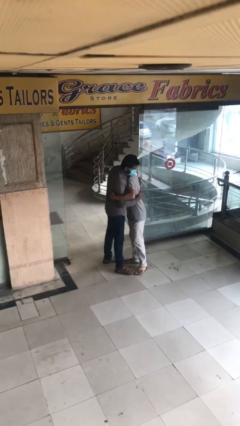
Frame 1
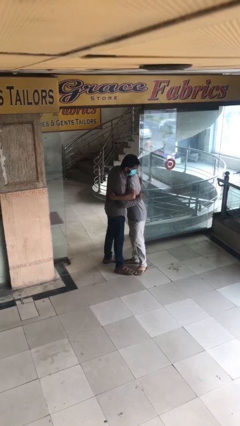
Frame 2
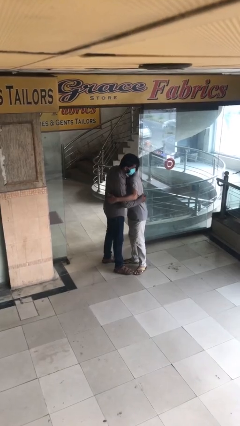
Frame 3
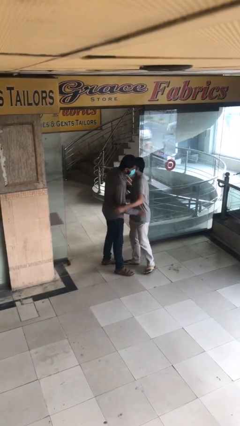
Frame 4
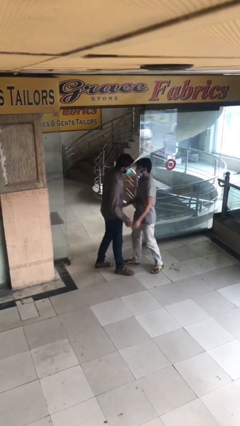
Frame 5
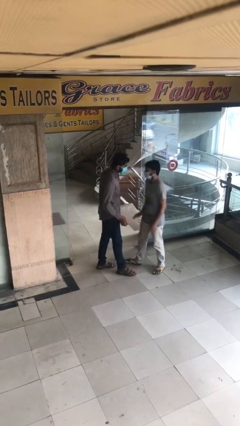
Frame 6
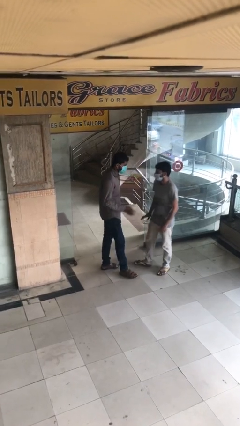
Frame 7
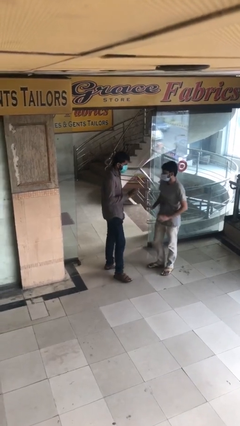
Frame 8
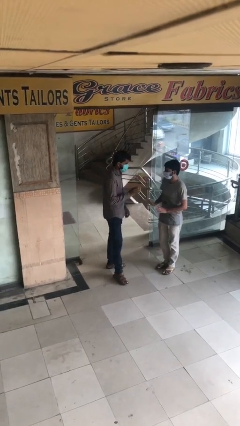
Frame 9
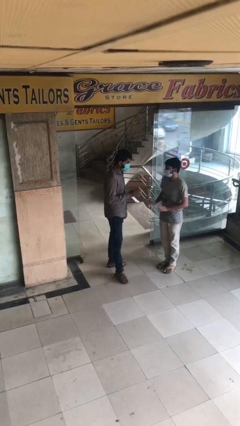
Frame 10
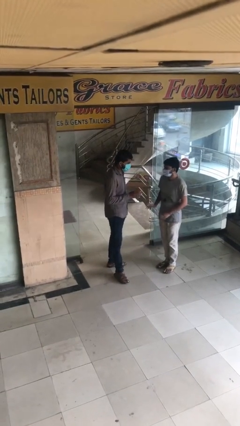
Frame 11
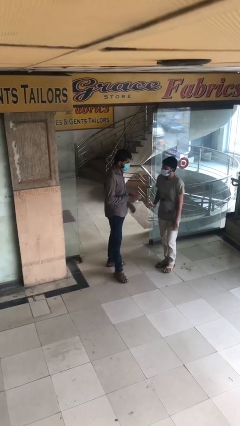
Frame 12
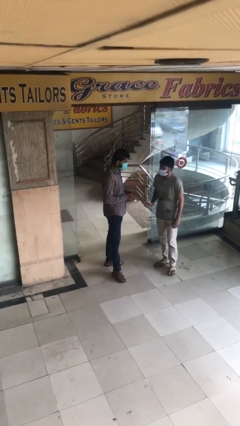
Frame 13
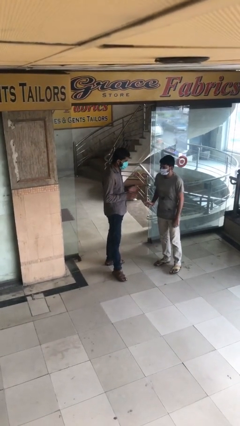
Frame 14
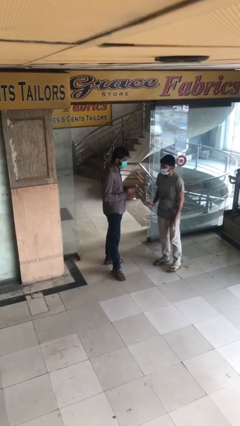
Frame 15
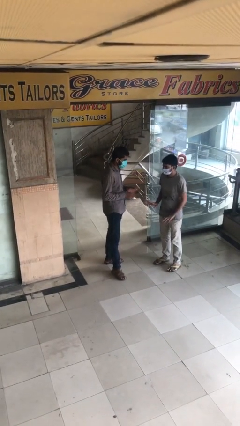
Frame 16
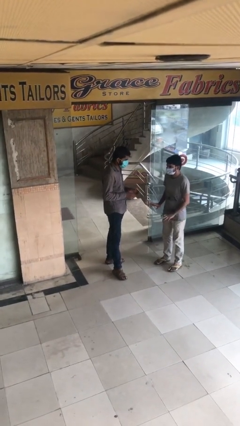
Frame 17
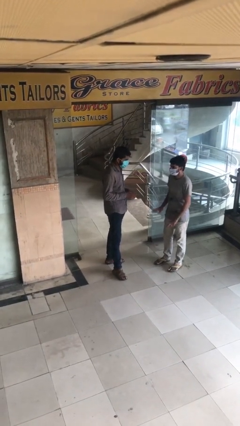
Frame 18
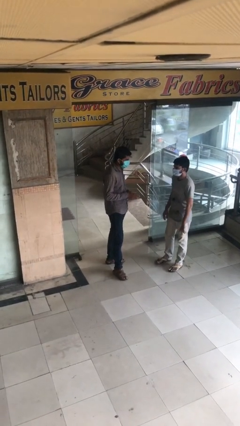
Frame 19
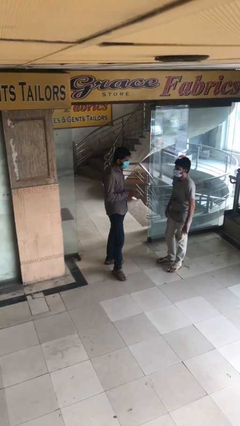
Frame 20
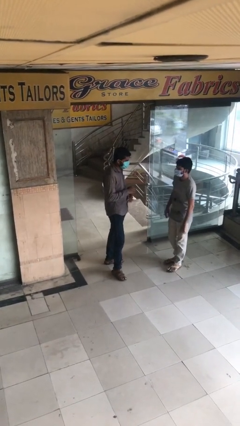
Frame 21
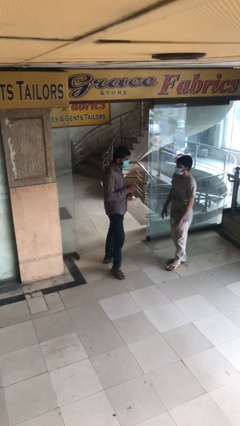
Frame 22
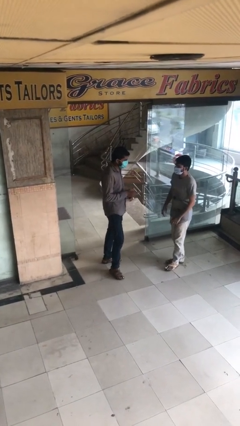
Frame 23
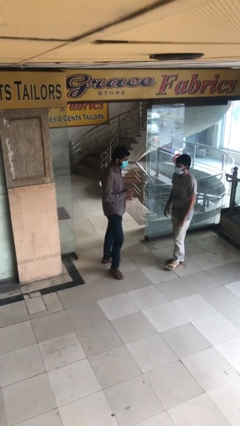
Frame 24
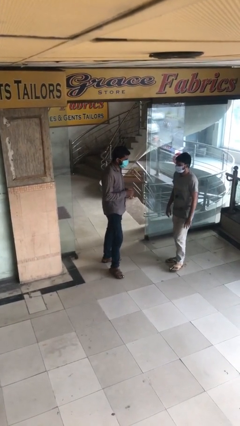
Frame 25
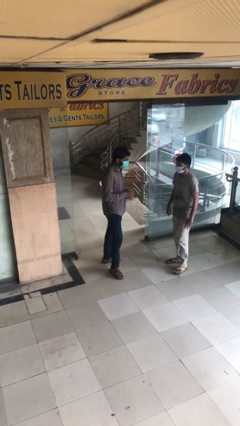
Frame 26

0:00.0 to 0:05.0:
person talks to person

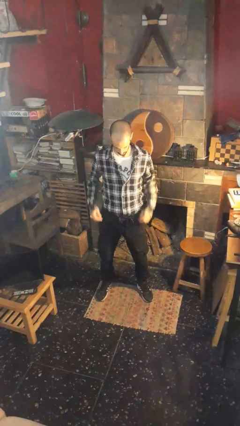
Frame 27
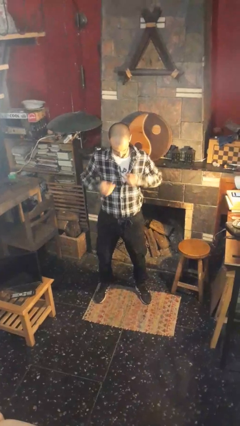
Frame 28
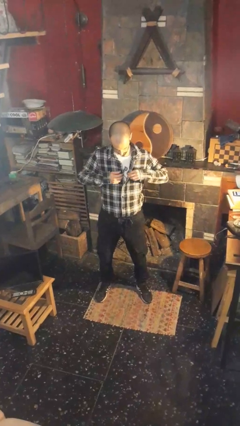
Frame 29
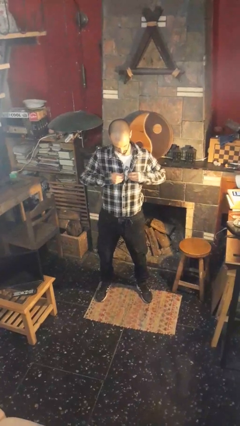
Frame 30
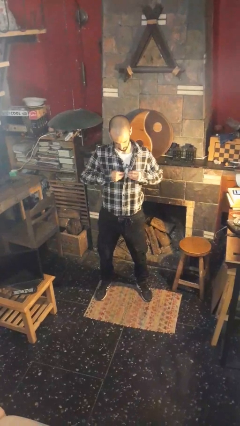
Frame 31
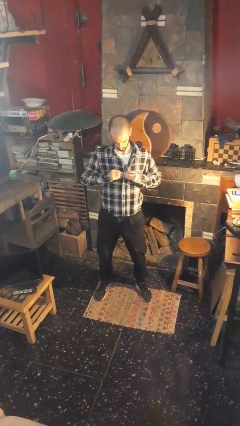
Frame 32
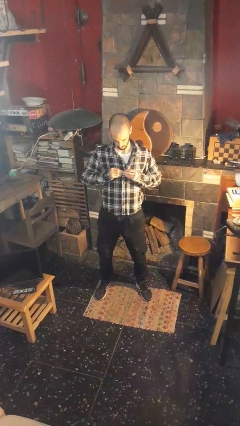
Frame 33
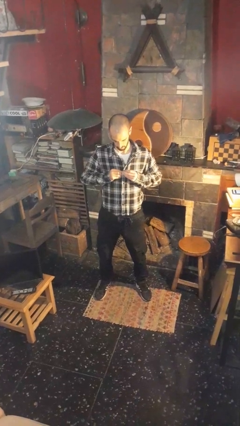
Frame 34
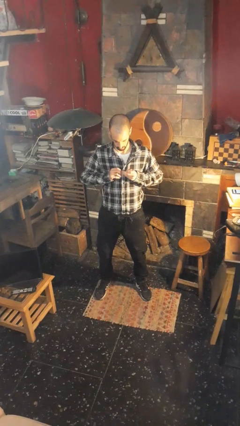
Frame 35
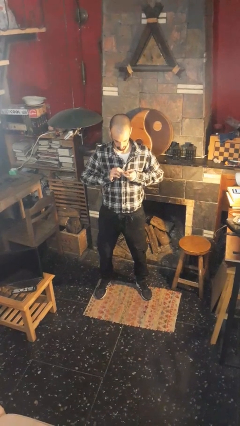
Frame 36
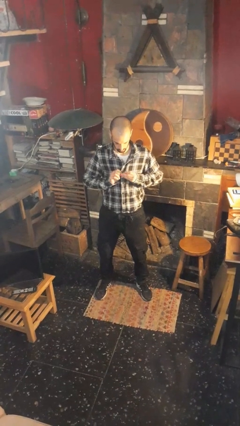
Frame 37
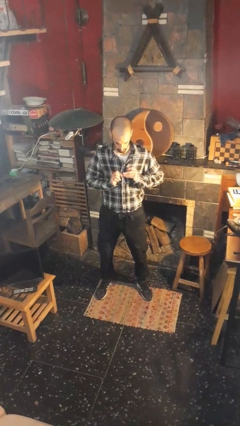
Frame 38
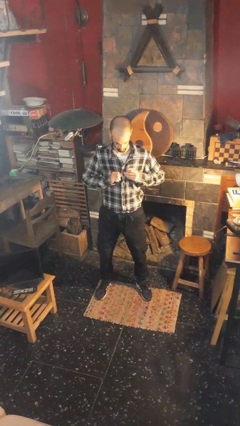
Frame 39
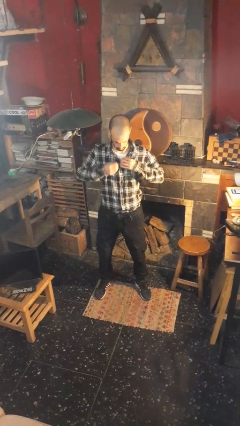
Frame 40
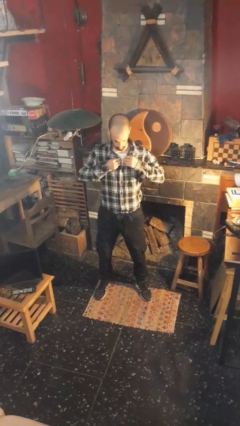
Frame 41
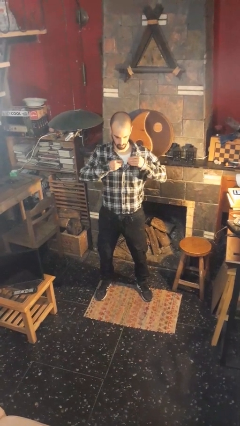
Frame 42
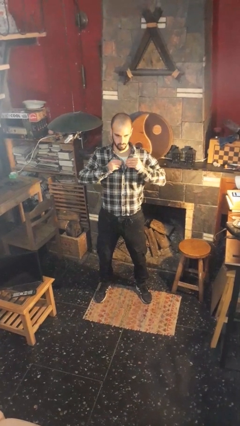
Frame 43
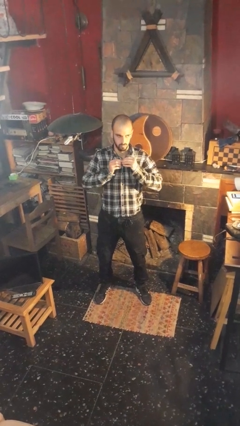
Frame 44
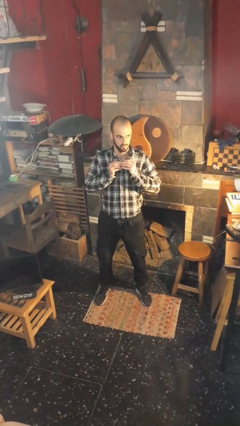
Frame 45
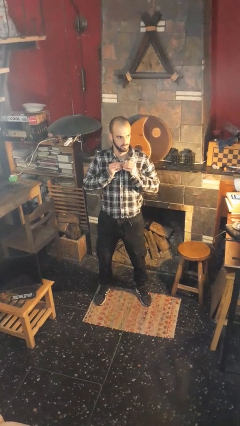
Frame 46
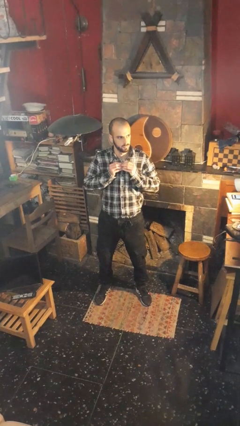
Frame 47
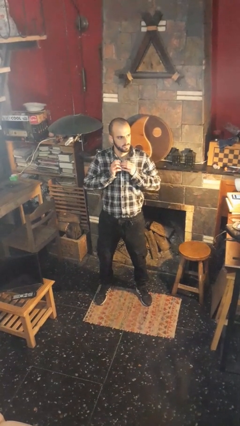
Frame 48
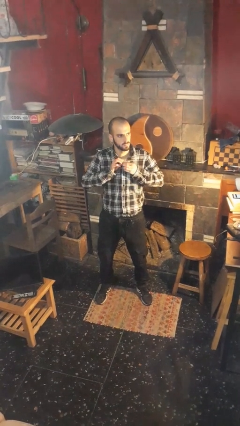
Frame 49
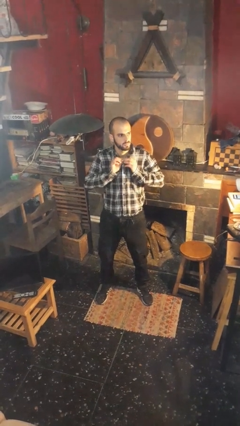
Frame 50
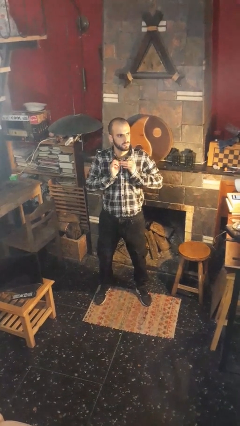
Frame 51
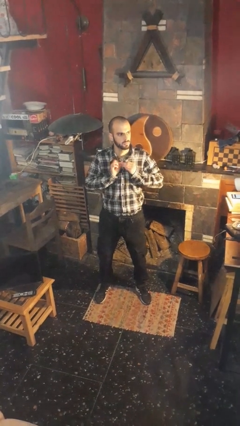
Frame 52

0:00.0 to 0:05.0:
person buttons shirt

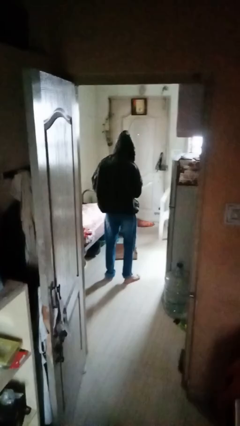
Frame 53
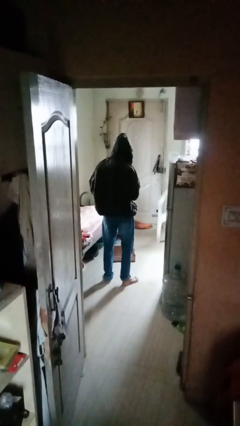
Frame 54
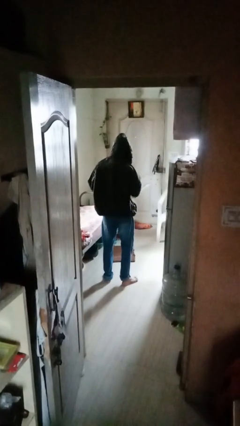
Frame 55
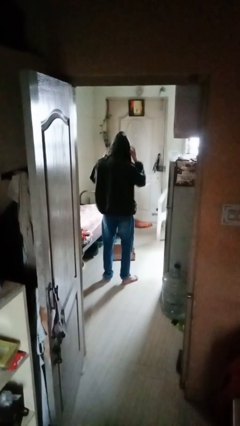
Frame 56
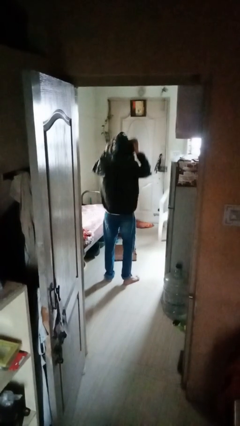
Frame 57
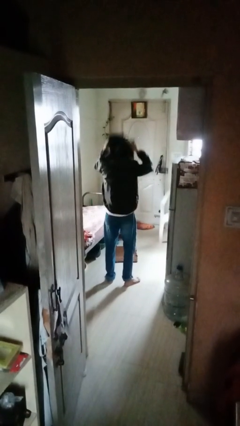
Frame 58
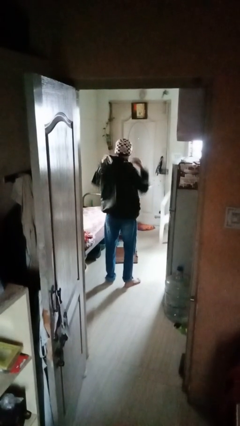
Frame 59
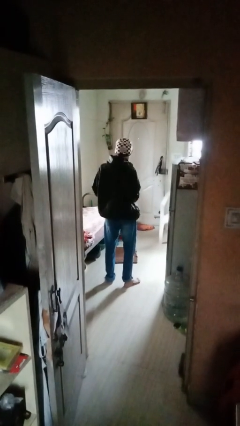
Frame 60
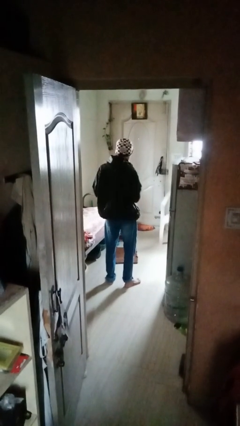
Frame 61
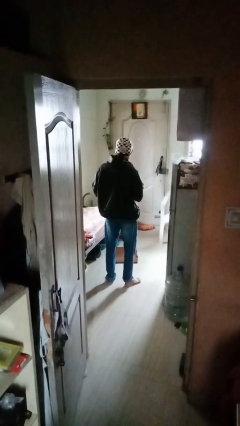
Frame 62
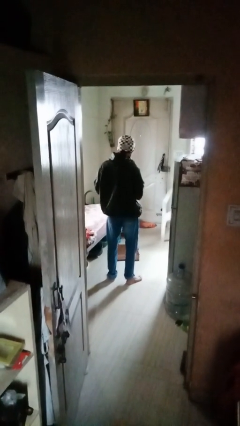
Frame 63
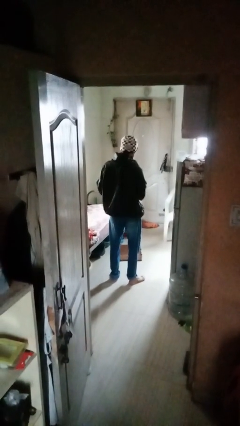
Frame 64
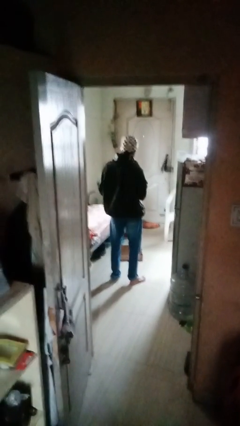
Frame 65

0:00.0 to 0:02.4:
person takes off hoodie

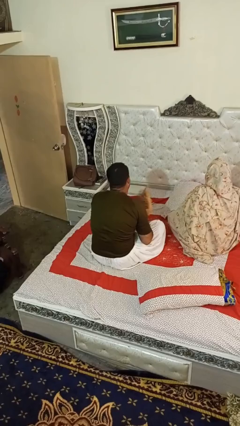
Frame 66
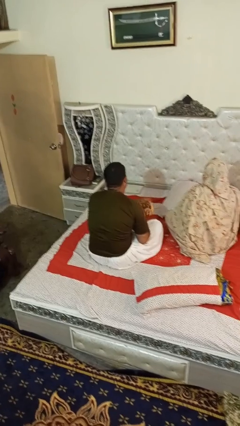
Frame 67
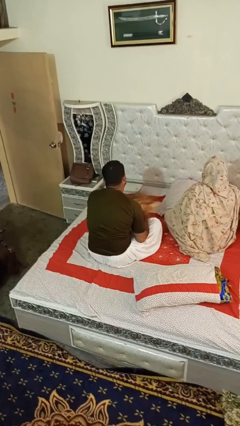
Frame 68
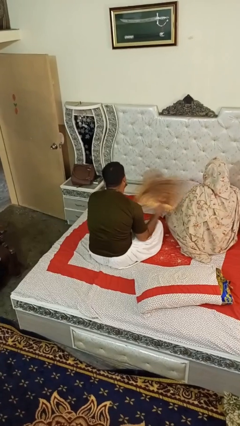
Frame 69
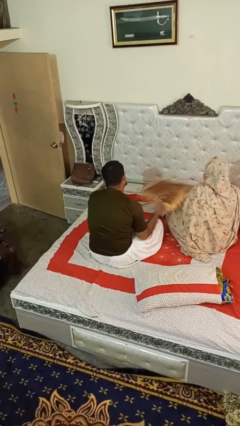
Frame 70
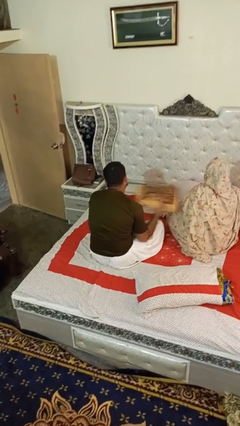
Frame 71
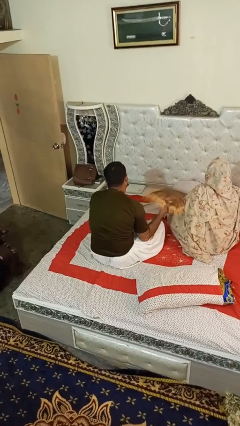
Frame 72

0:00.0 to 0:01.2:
person hits person with pillow

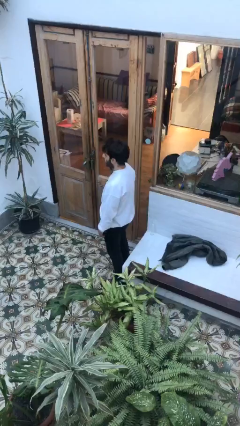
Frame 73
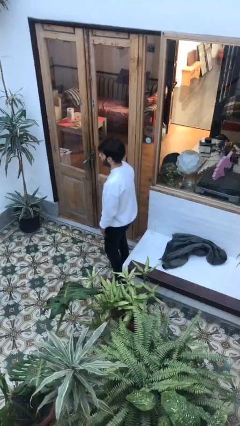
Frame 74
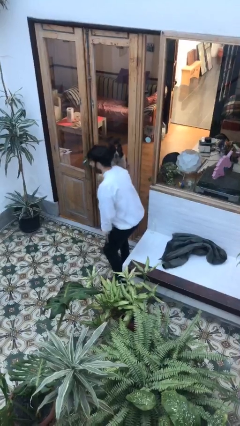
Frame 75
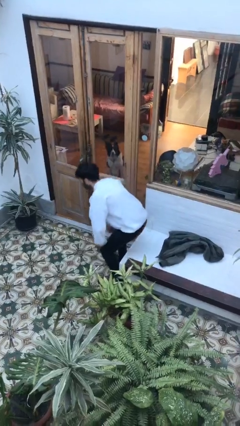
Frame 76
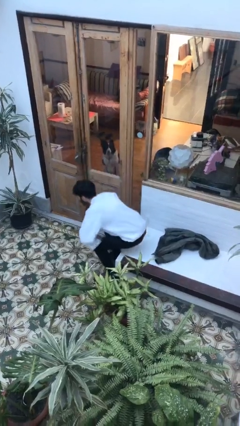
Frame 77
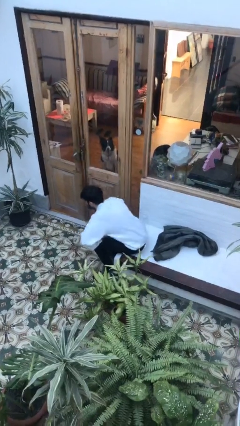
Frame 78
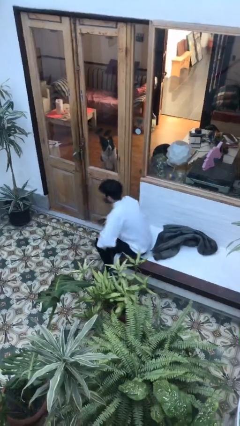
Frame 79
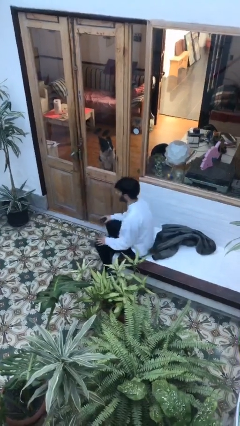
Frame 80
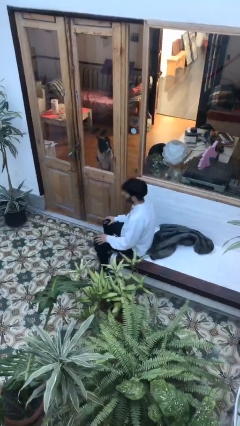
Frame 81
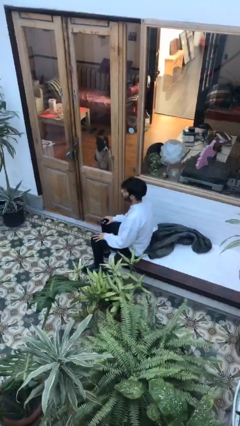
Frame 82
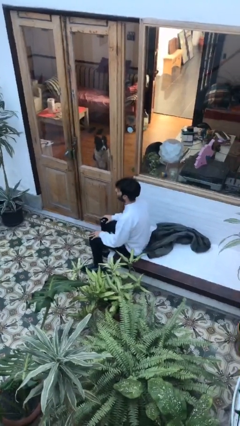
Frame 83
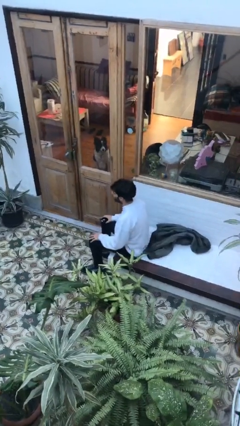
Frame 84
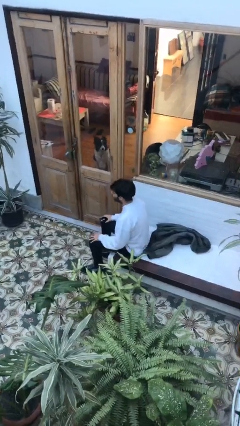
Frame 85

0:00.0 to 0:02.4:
person sits down

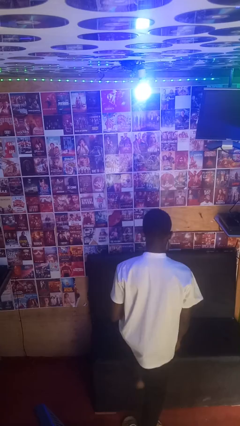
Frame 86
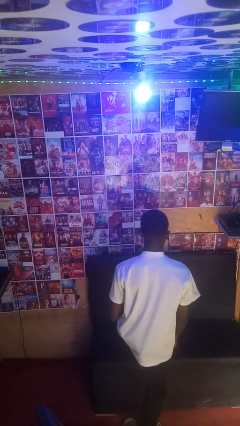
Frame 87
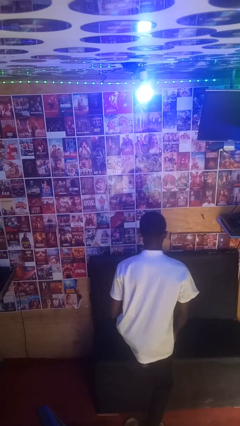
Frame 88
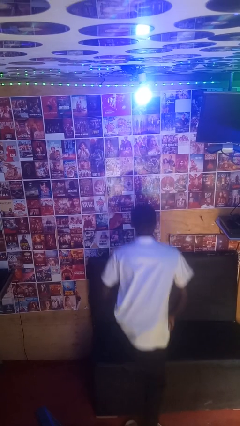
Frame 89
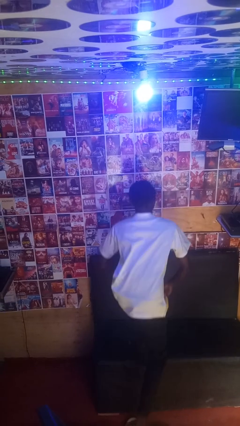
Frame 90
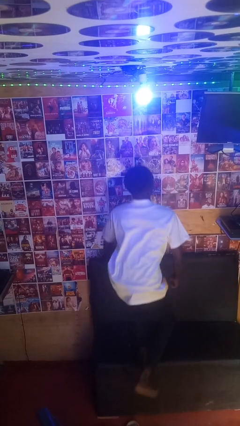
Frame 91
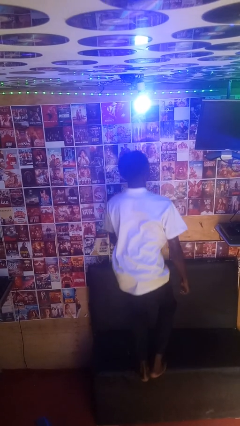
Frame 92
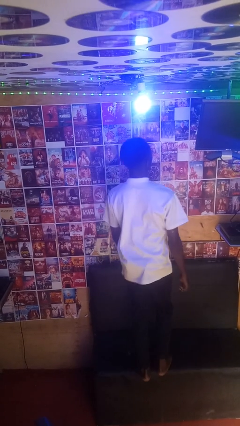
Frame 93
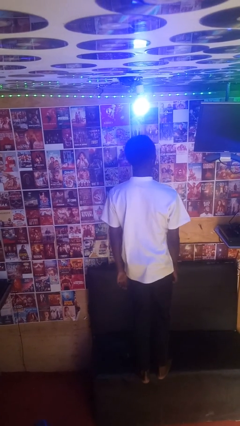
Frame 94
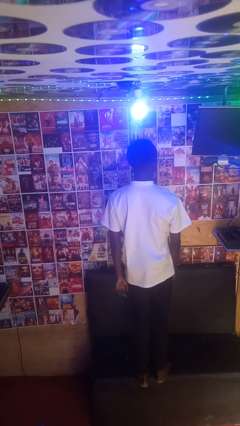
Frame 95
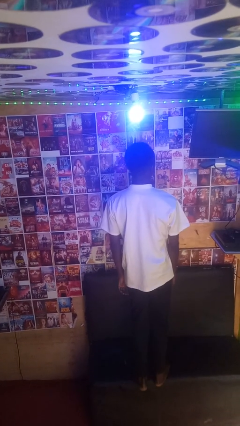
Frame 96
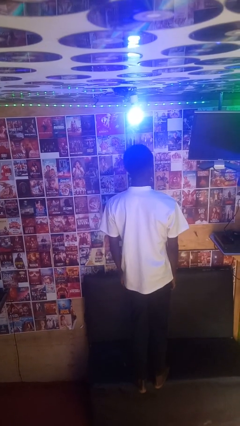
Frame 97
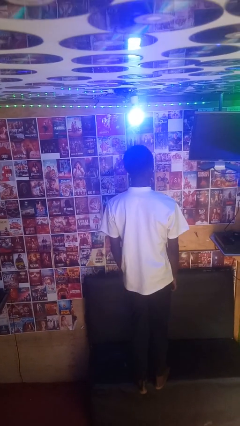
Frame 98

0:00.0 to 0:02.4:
person climbs on couch
